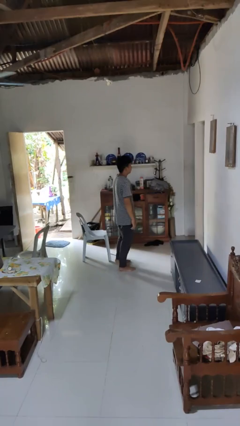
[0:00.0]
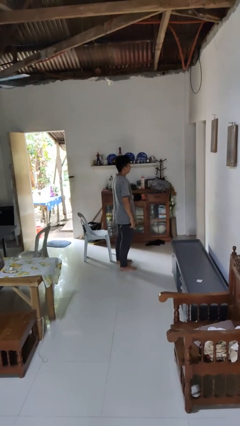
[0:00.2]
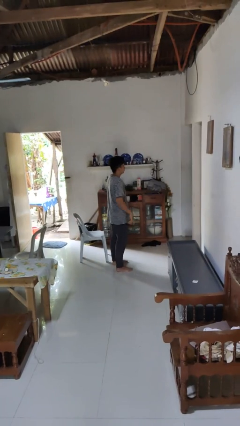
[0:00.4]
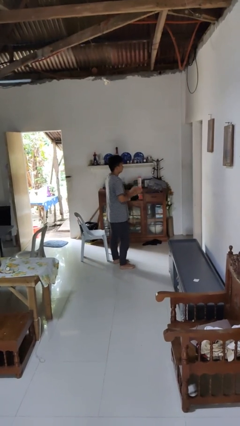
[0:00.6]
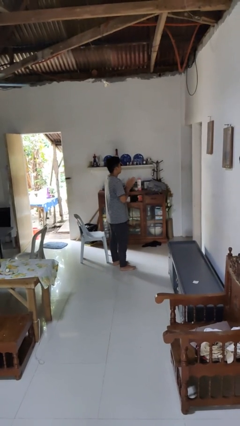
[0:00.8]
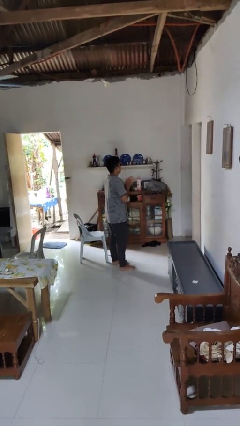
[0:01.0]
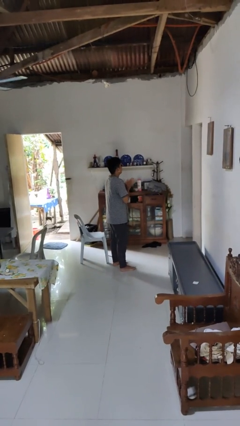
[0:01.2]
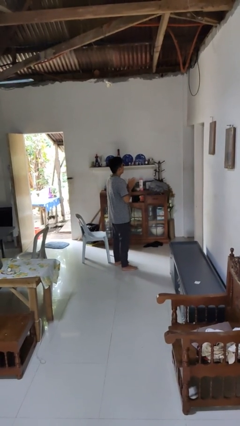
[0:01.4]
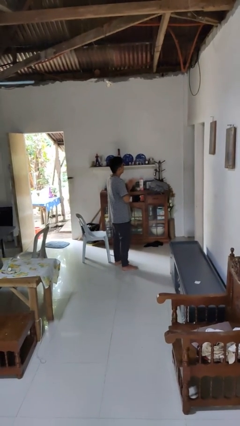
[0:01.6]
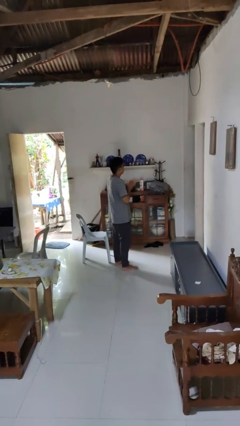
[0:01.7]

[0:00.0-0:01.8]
person claps hands

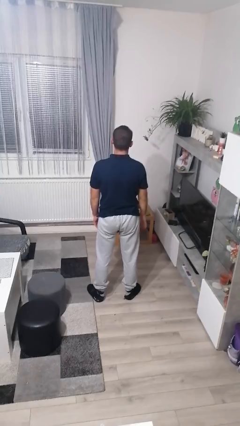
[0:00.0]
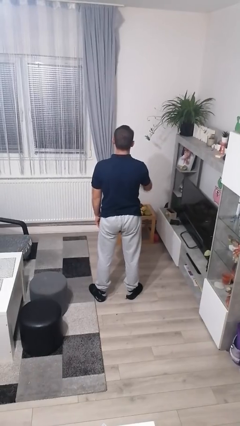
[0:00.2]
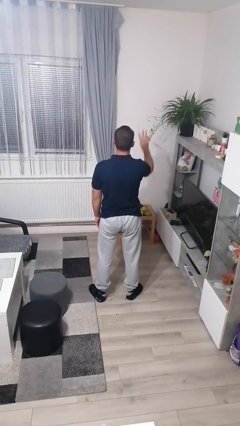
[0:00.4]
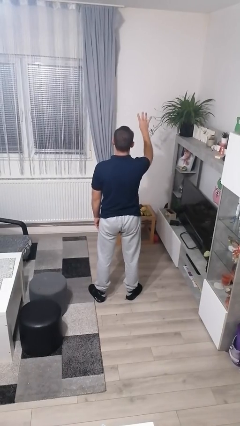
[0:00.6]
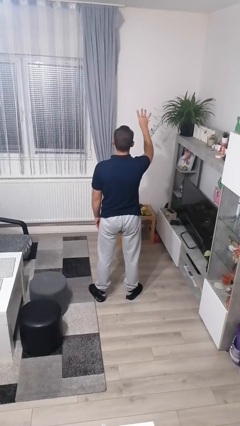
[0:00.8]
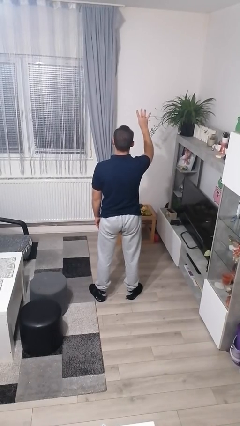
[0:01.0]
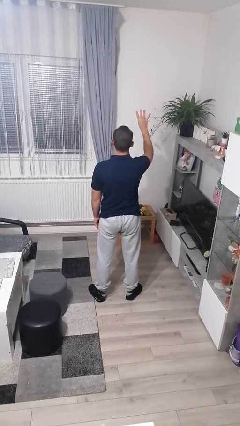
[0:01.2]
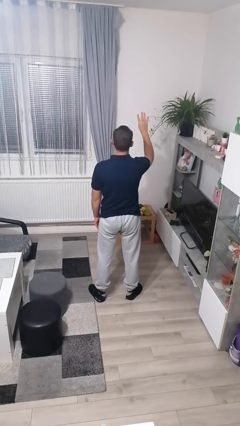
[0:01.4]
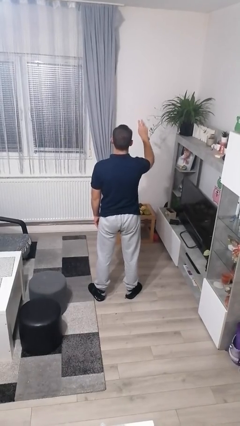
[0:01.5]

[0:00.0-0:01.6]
person gestures number four

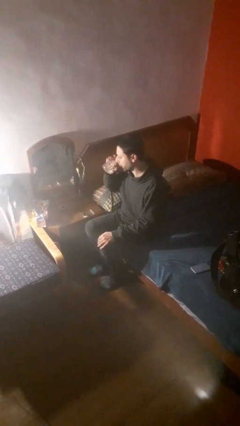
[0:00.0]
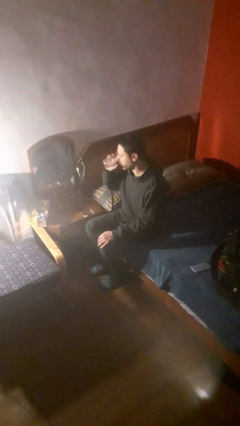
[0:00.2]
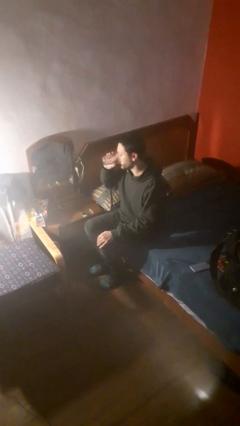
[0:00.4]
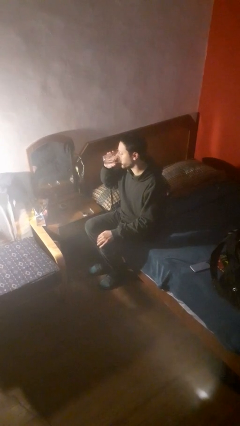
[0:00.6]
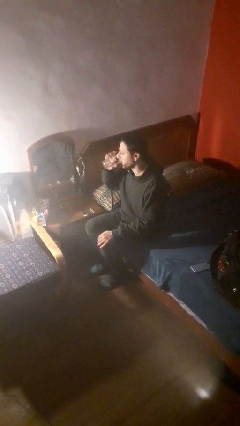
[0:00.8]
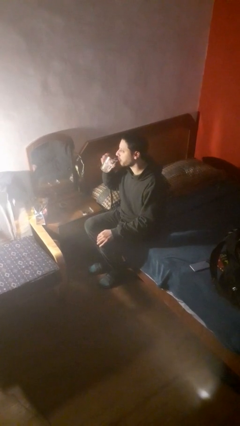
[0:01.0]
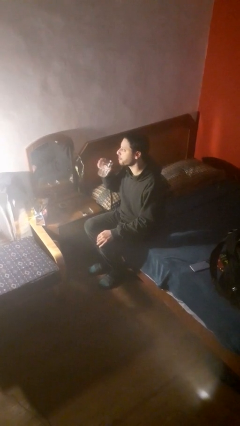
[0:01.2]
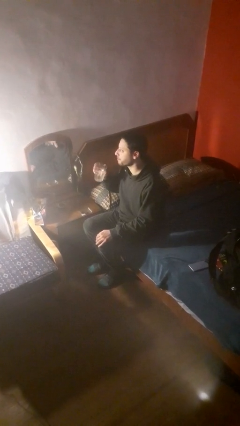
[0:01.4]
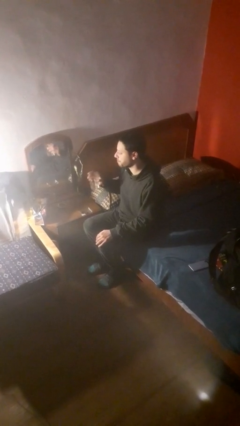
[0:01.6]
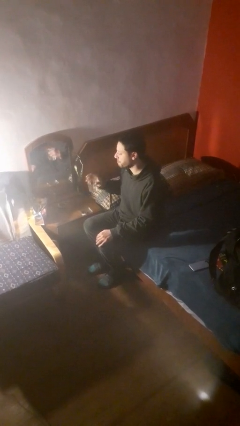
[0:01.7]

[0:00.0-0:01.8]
person drinks from cup

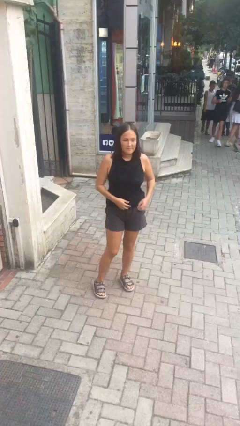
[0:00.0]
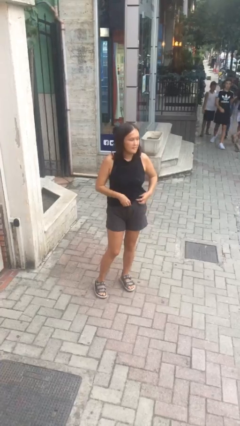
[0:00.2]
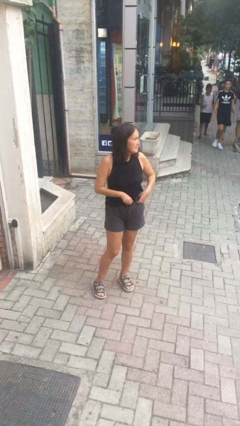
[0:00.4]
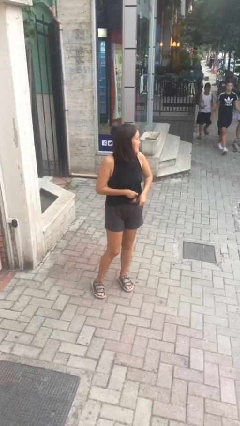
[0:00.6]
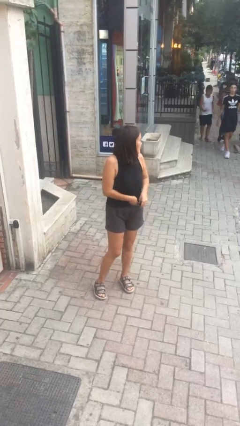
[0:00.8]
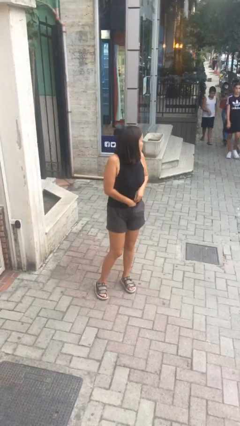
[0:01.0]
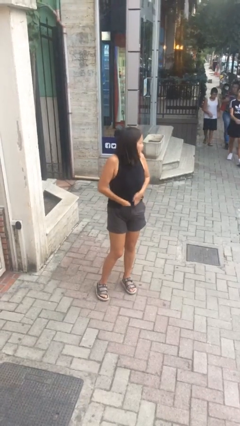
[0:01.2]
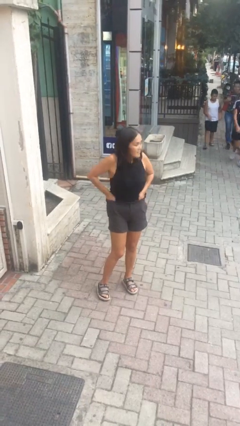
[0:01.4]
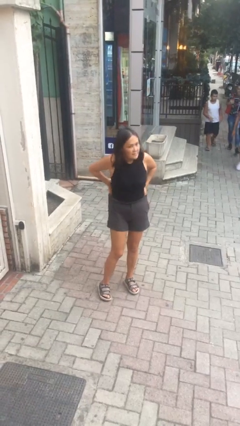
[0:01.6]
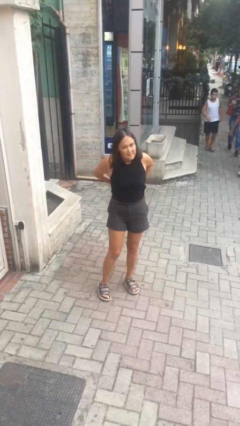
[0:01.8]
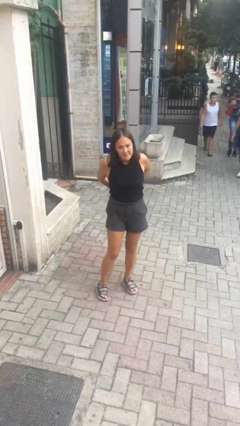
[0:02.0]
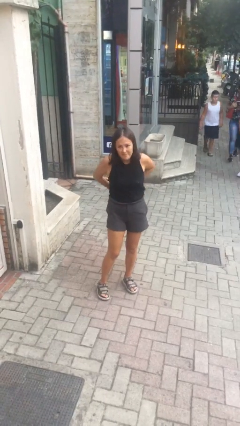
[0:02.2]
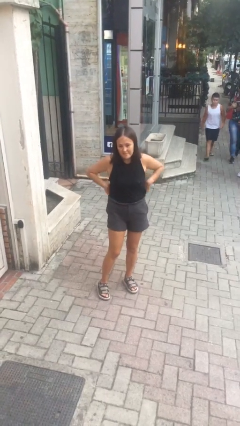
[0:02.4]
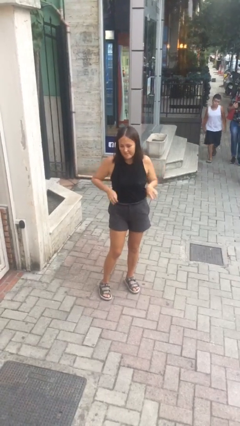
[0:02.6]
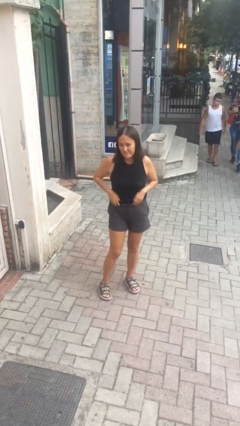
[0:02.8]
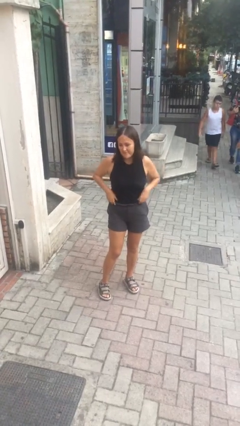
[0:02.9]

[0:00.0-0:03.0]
person tucks in shirt

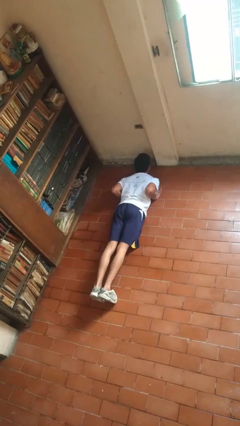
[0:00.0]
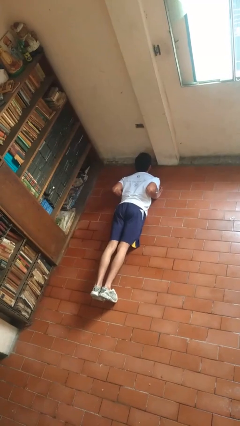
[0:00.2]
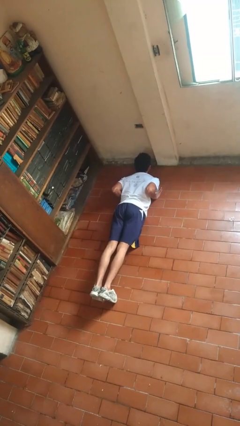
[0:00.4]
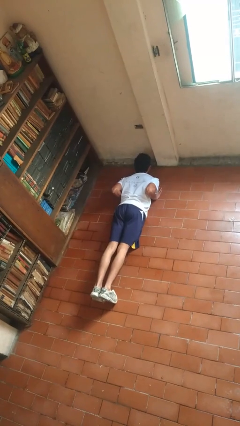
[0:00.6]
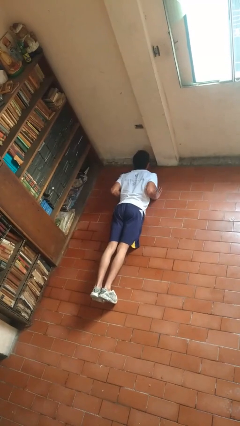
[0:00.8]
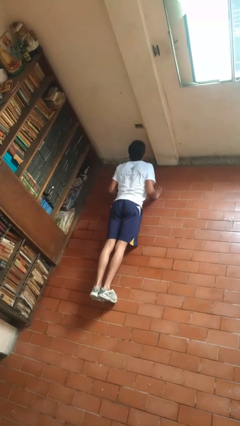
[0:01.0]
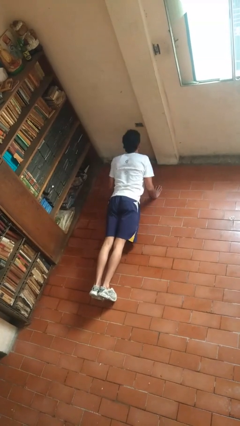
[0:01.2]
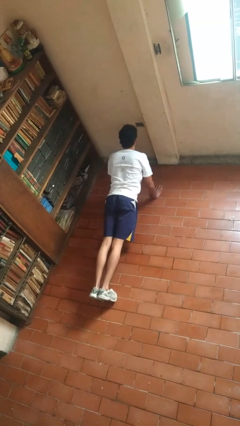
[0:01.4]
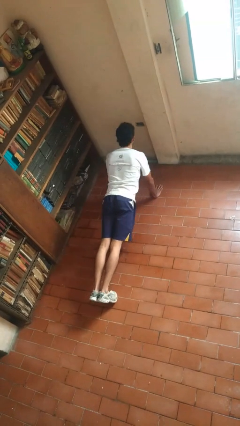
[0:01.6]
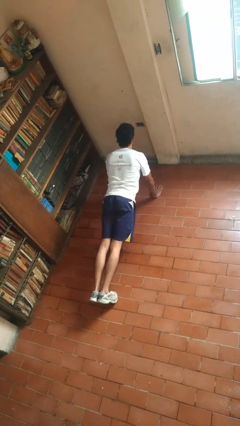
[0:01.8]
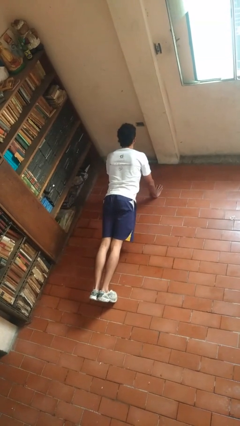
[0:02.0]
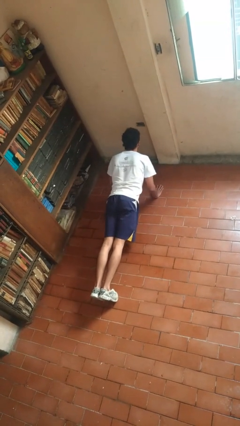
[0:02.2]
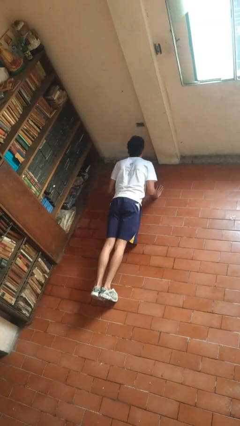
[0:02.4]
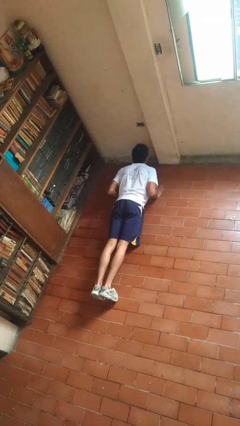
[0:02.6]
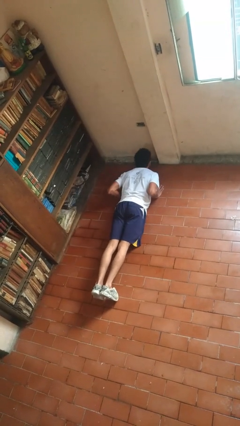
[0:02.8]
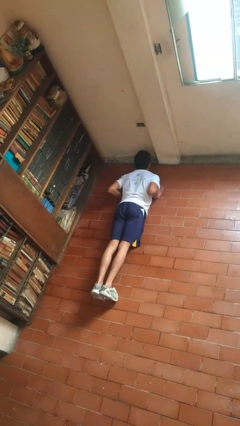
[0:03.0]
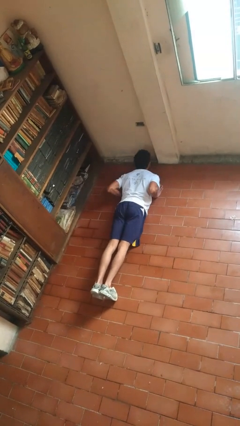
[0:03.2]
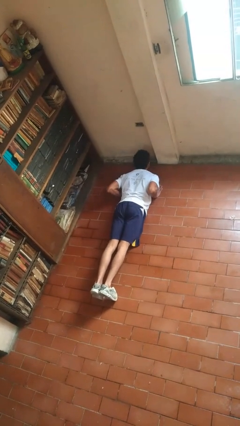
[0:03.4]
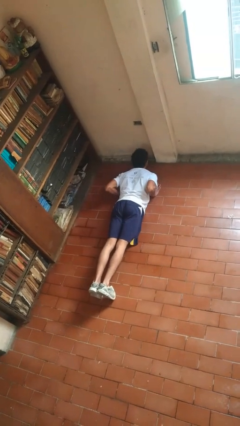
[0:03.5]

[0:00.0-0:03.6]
person exercises with pushup

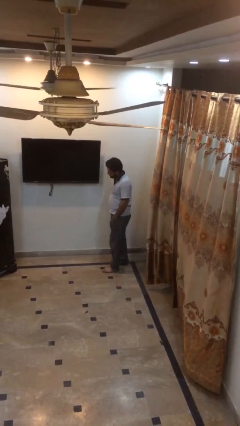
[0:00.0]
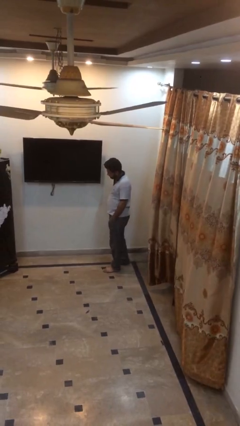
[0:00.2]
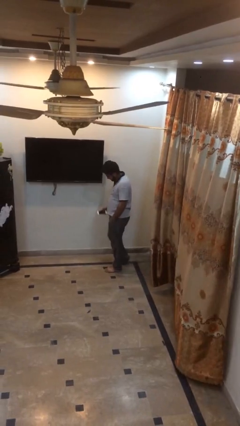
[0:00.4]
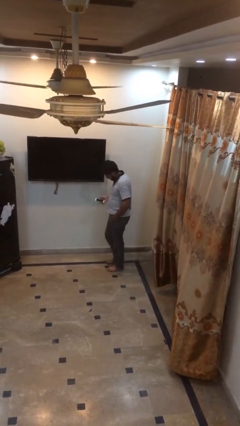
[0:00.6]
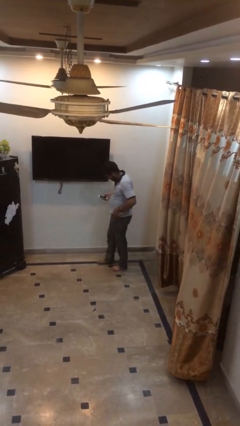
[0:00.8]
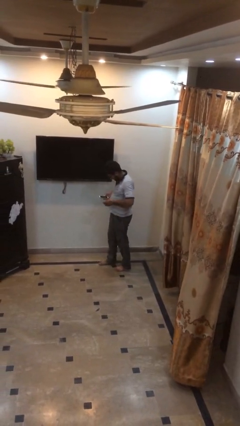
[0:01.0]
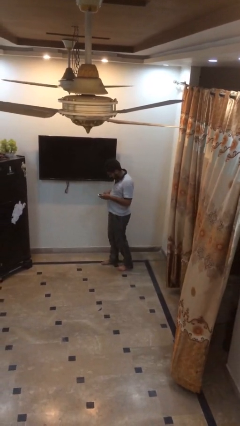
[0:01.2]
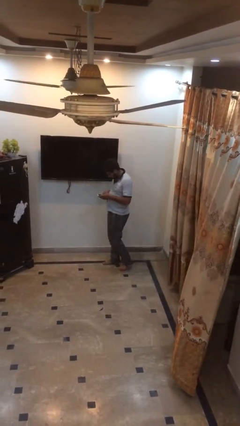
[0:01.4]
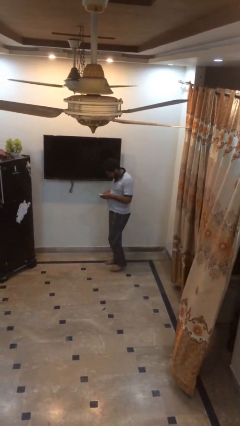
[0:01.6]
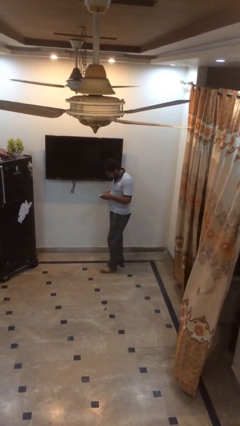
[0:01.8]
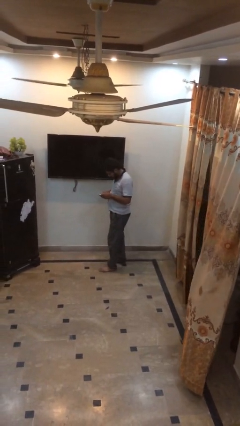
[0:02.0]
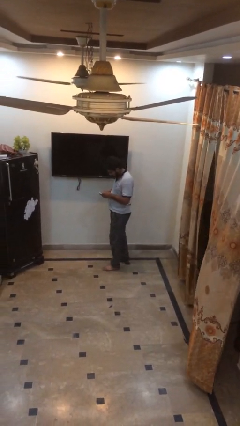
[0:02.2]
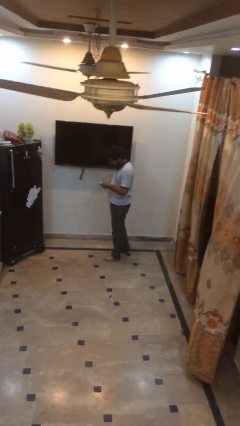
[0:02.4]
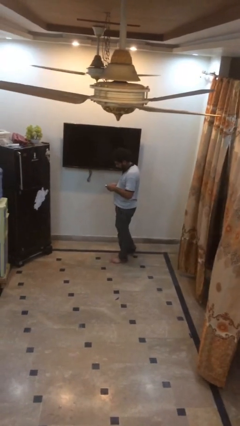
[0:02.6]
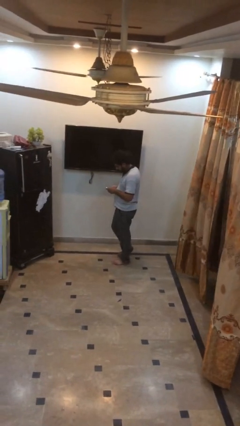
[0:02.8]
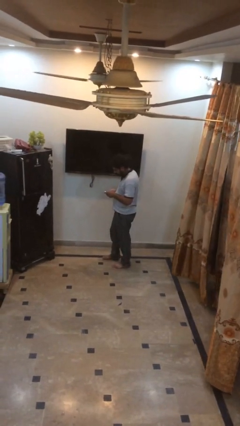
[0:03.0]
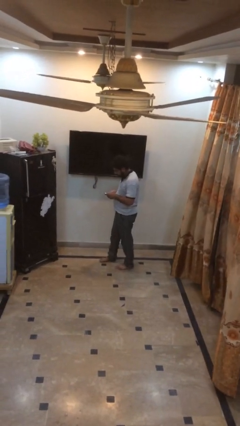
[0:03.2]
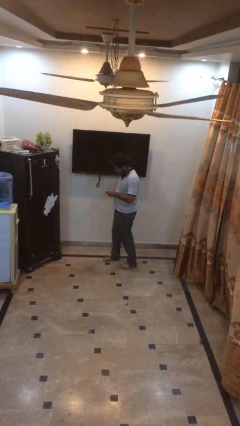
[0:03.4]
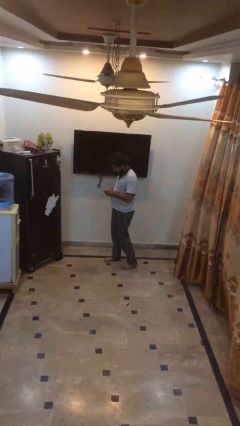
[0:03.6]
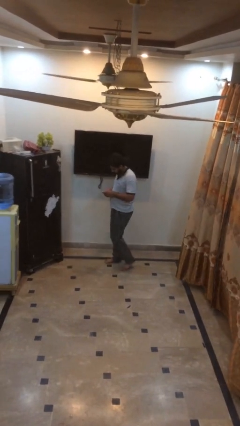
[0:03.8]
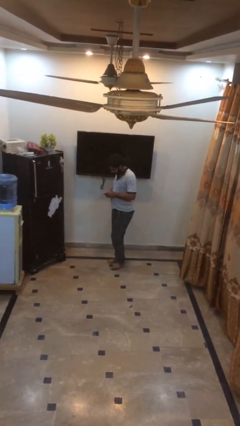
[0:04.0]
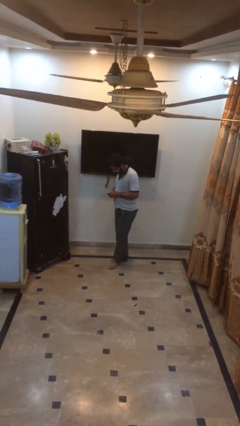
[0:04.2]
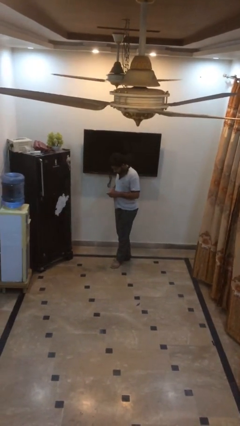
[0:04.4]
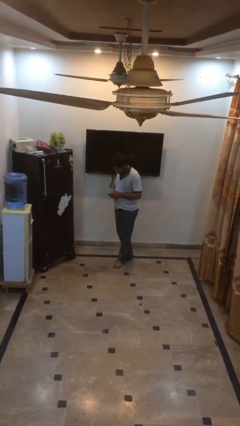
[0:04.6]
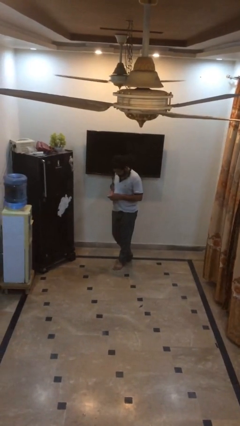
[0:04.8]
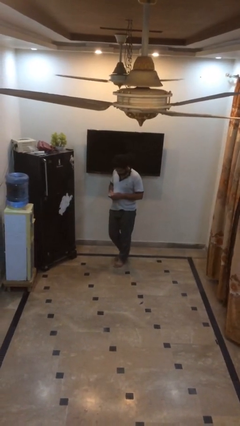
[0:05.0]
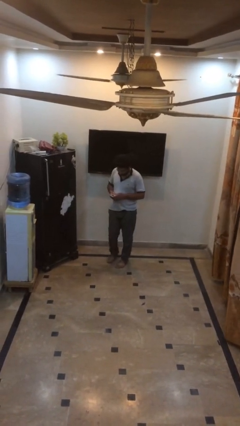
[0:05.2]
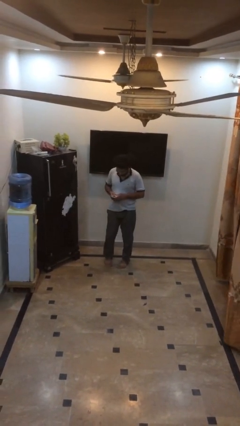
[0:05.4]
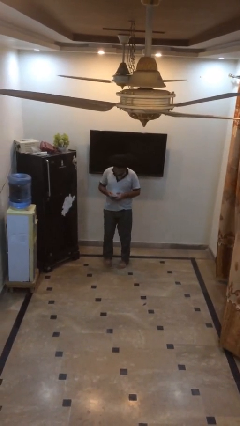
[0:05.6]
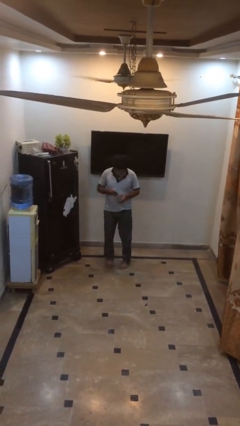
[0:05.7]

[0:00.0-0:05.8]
person texts on phone
